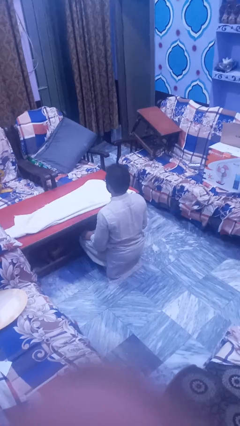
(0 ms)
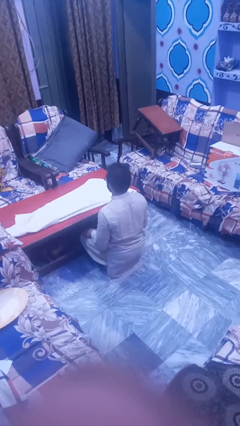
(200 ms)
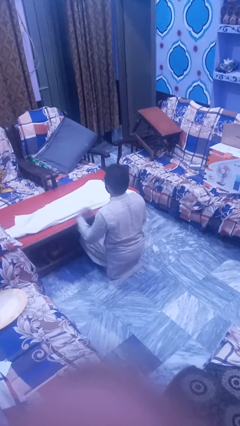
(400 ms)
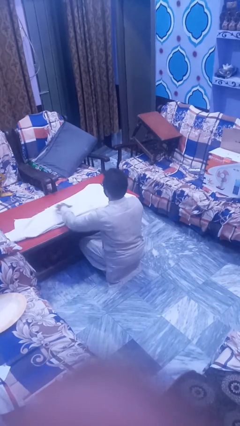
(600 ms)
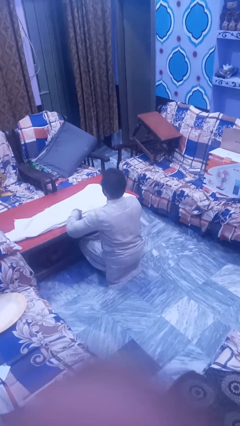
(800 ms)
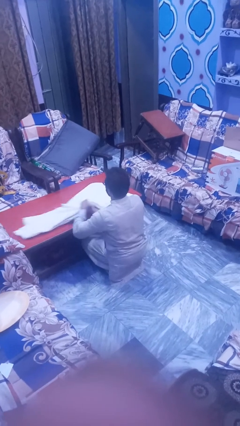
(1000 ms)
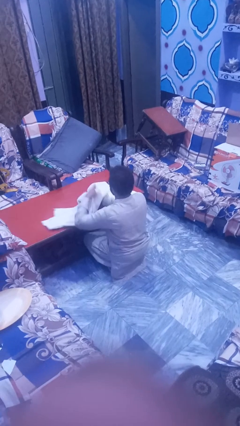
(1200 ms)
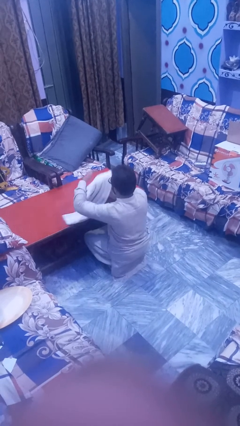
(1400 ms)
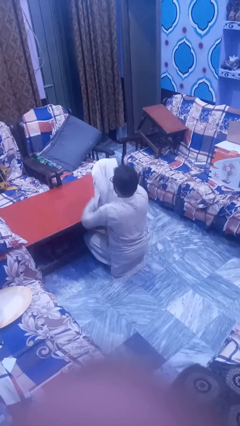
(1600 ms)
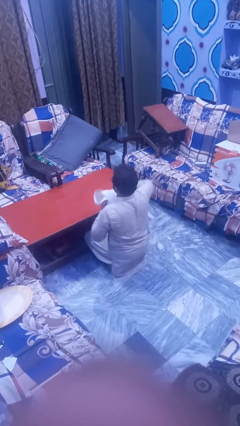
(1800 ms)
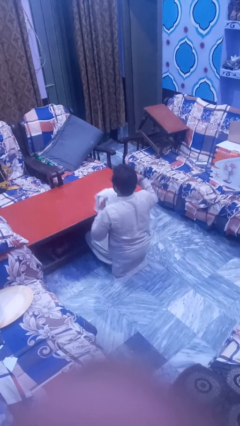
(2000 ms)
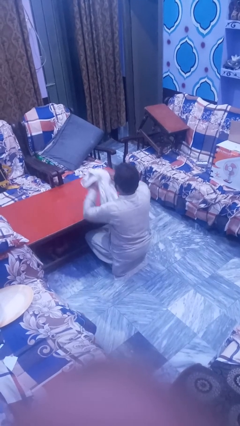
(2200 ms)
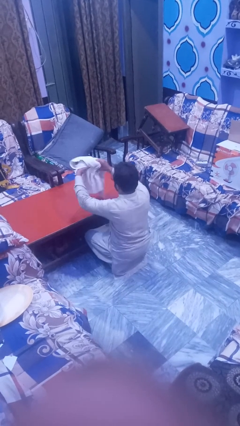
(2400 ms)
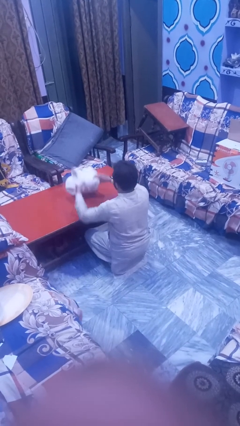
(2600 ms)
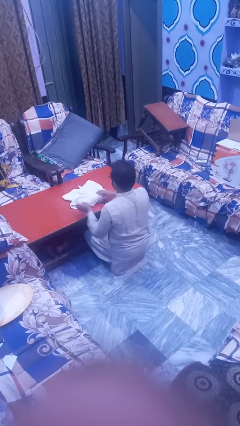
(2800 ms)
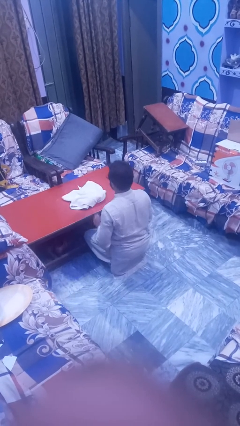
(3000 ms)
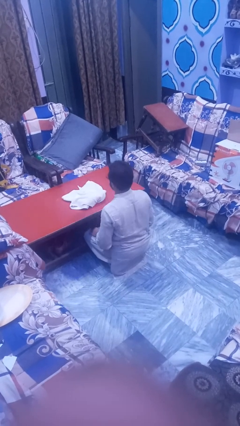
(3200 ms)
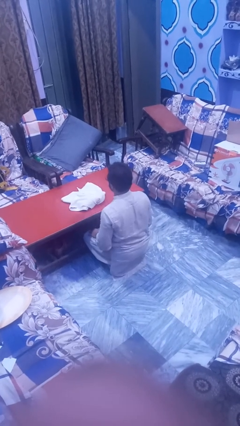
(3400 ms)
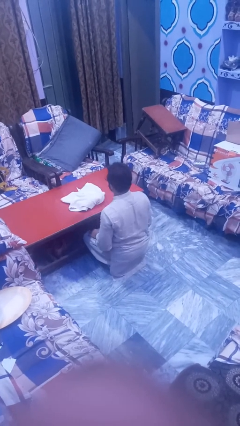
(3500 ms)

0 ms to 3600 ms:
person folds tablecloth

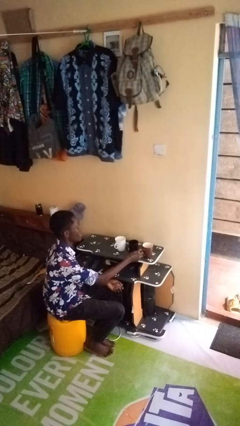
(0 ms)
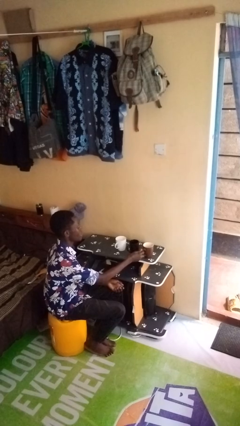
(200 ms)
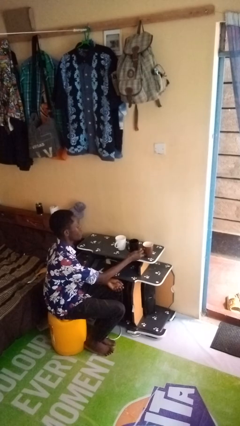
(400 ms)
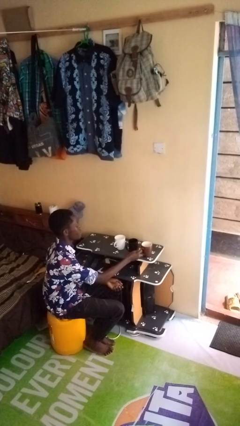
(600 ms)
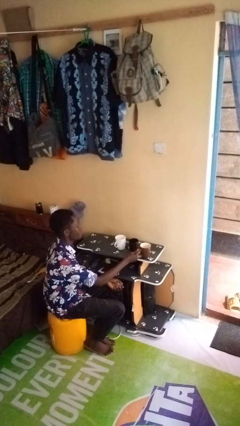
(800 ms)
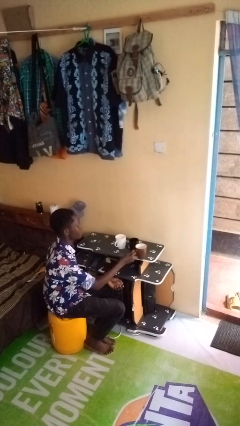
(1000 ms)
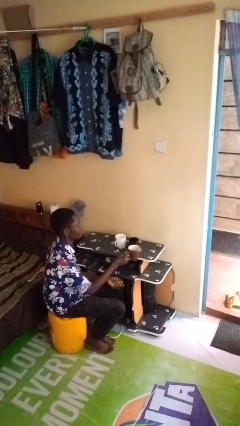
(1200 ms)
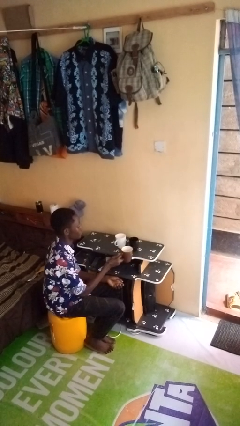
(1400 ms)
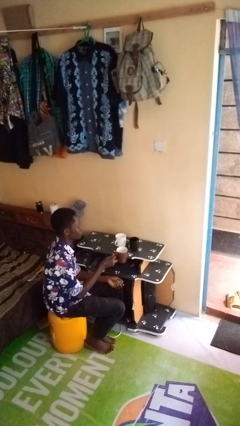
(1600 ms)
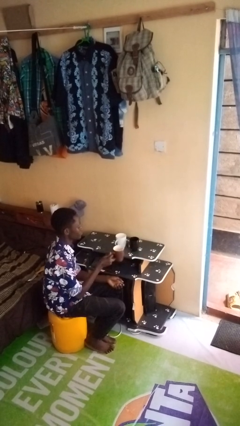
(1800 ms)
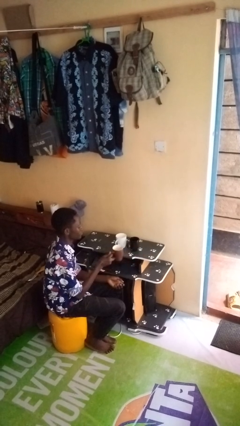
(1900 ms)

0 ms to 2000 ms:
person picks up object from table

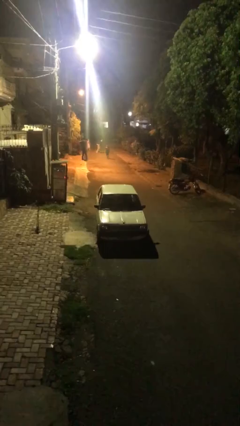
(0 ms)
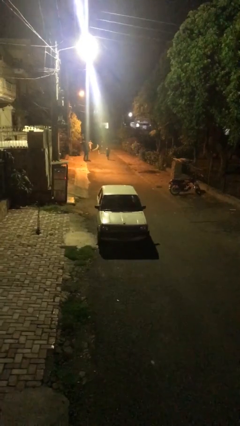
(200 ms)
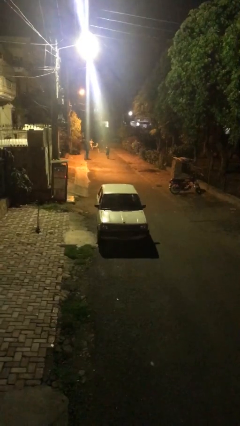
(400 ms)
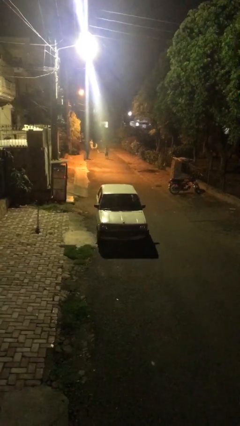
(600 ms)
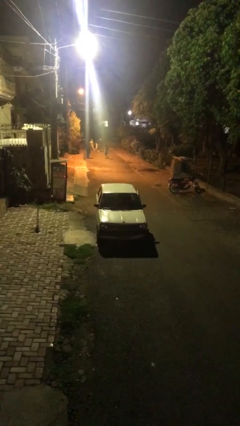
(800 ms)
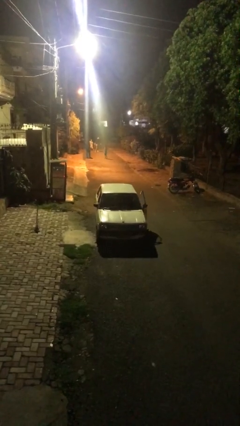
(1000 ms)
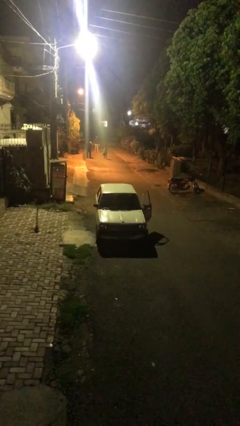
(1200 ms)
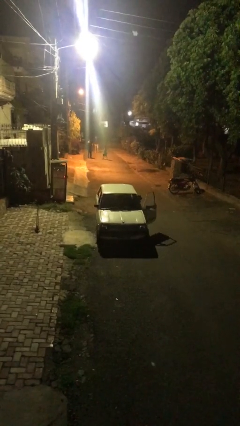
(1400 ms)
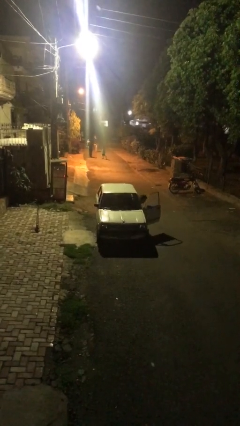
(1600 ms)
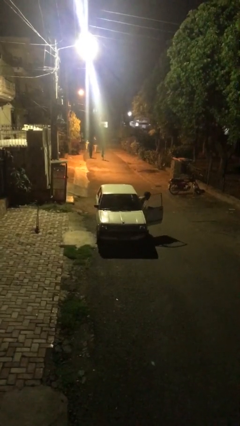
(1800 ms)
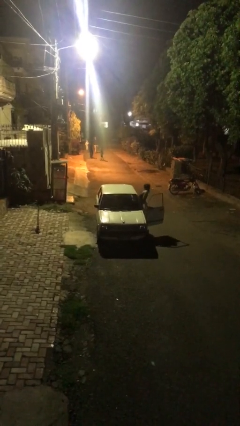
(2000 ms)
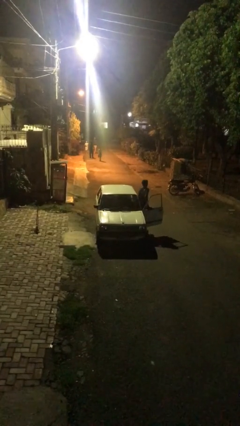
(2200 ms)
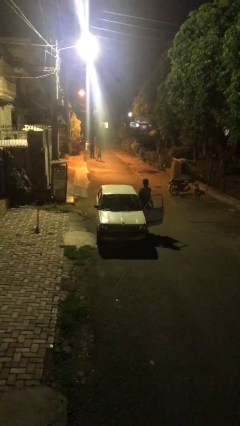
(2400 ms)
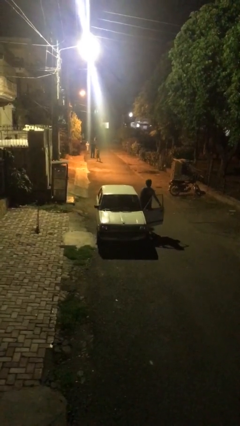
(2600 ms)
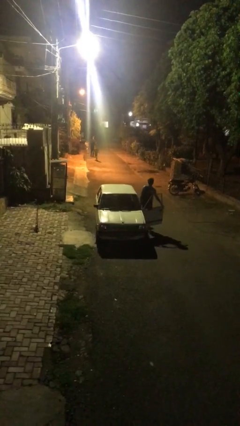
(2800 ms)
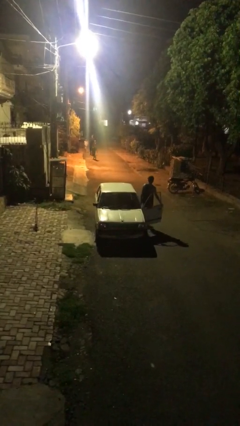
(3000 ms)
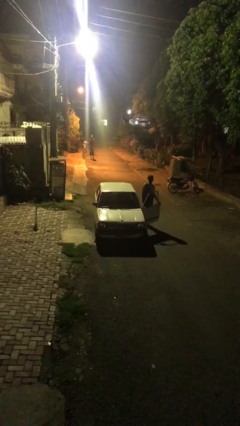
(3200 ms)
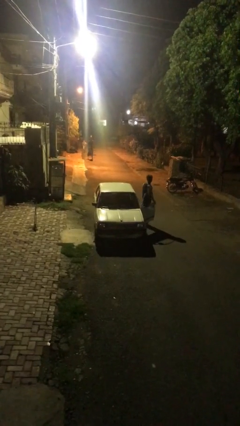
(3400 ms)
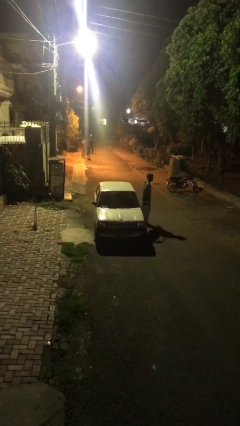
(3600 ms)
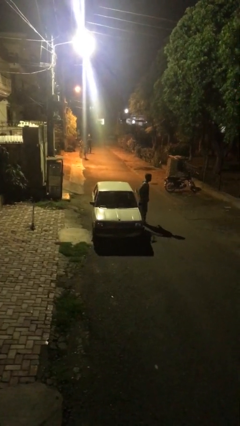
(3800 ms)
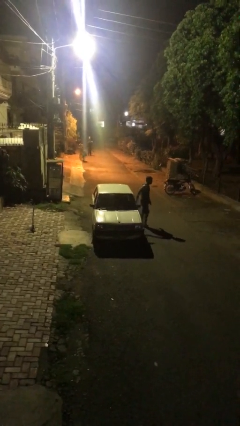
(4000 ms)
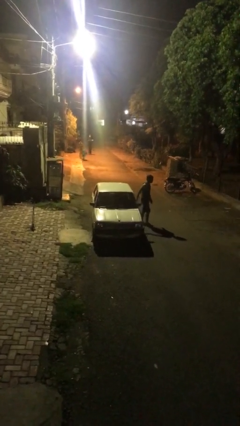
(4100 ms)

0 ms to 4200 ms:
car drops off person

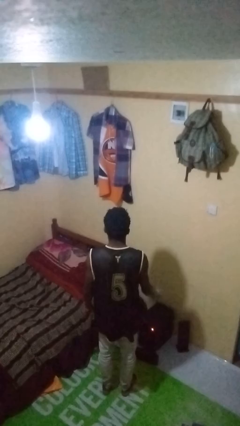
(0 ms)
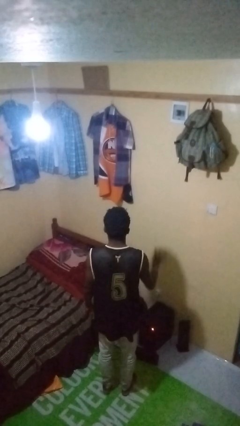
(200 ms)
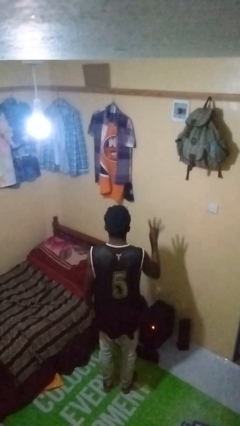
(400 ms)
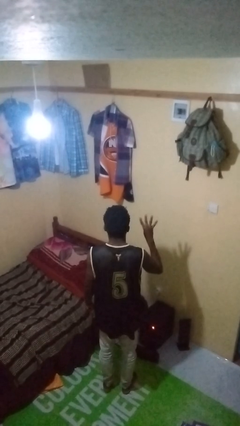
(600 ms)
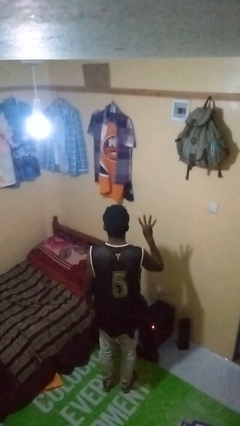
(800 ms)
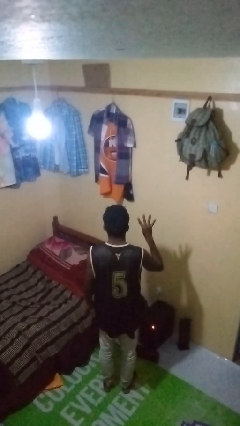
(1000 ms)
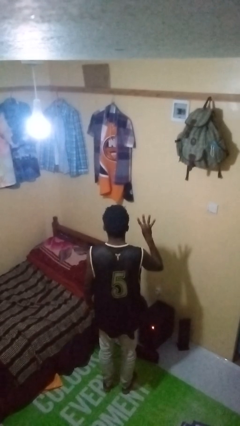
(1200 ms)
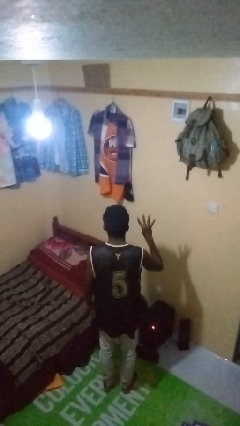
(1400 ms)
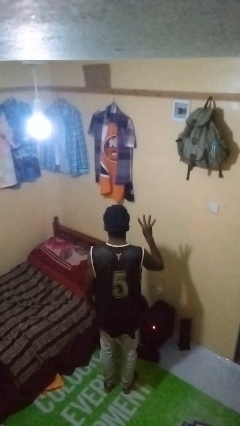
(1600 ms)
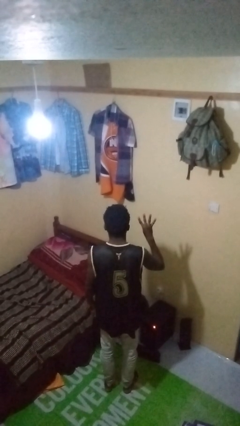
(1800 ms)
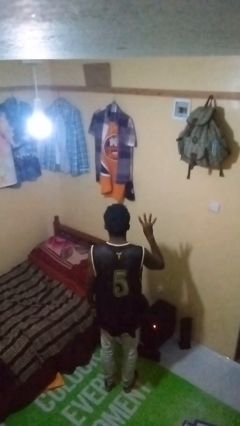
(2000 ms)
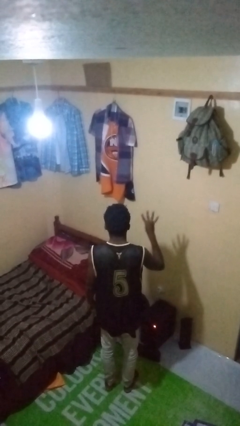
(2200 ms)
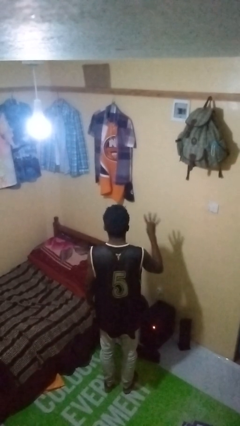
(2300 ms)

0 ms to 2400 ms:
person gestures number four

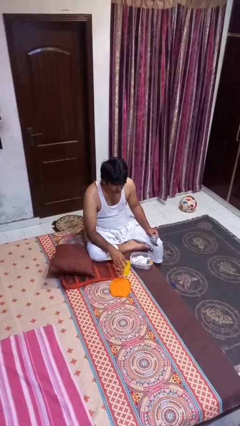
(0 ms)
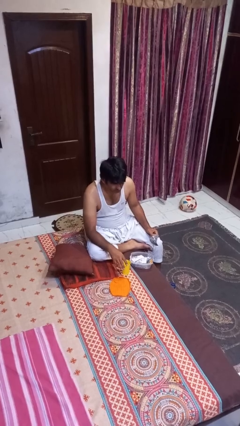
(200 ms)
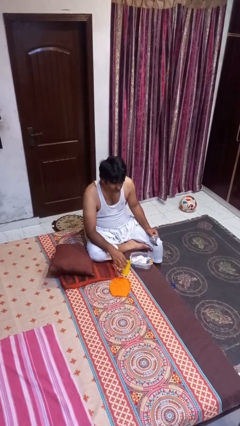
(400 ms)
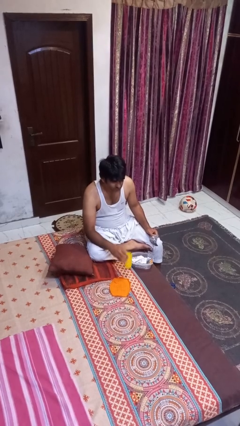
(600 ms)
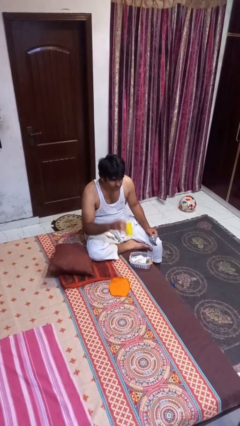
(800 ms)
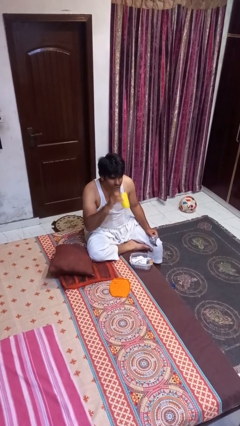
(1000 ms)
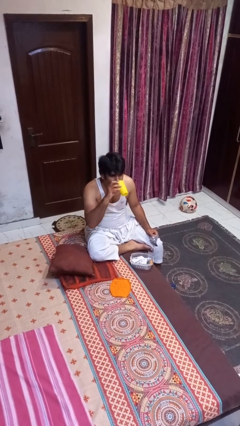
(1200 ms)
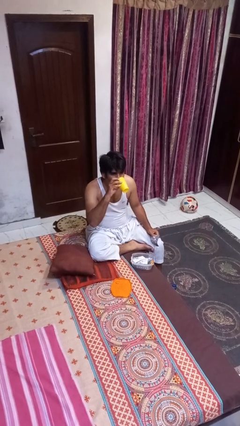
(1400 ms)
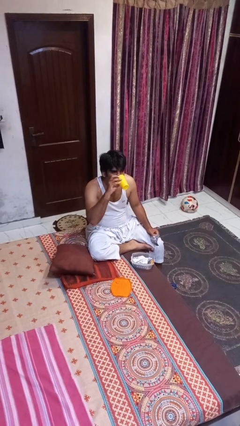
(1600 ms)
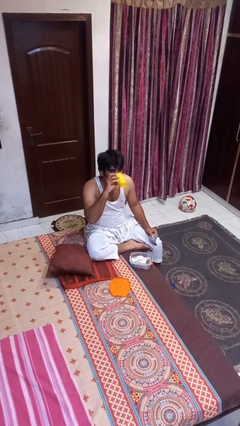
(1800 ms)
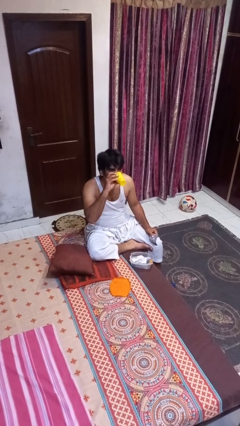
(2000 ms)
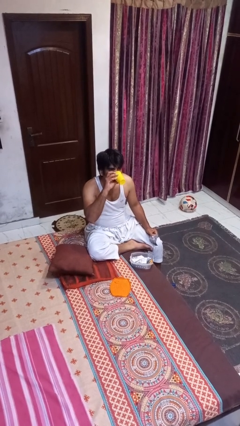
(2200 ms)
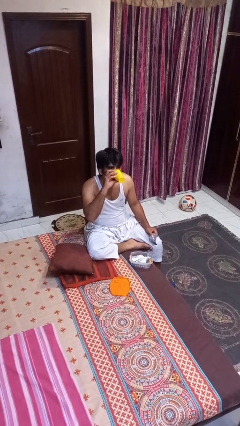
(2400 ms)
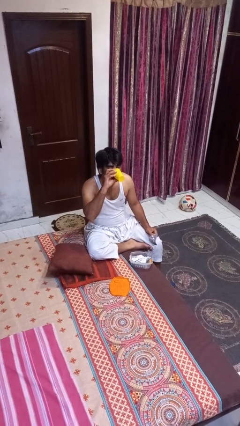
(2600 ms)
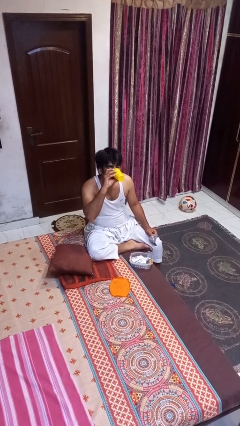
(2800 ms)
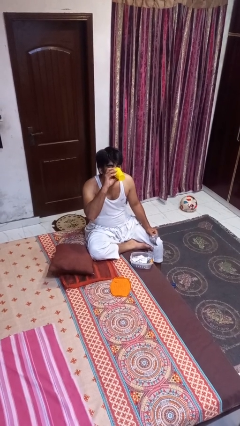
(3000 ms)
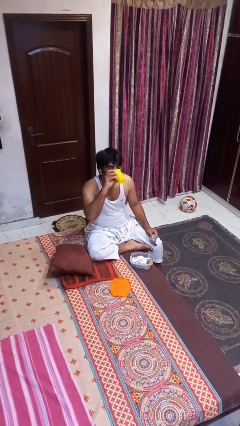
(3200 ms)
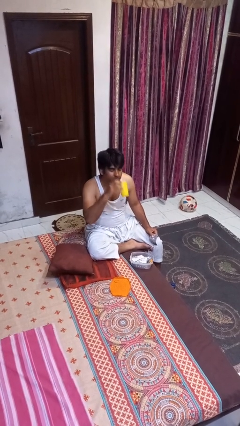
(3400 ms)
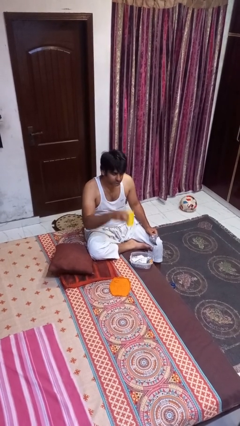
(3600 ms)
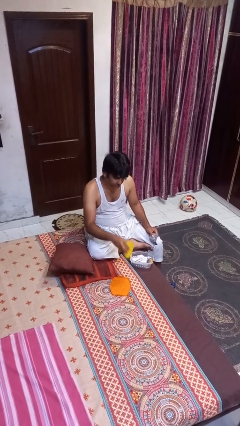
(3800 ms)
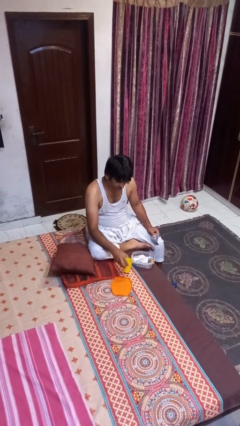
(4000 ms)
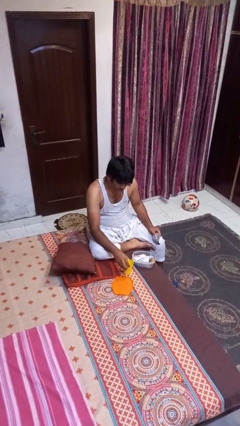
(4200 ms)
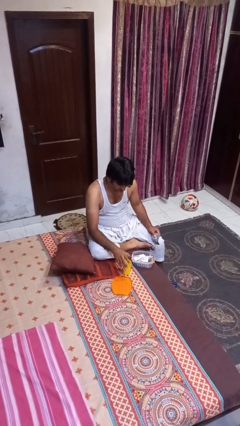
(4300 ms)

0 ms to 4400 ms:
person drinks from cup

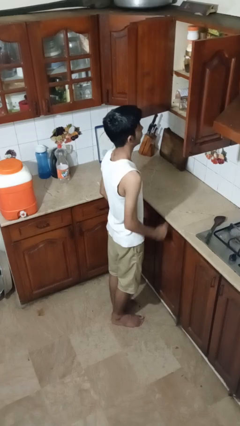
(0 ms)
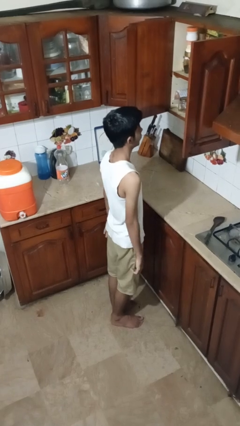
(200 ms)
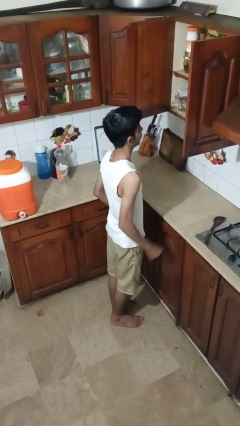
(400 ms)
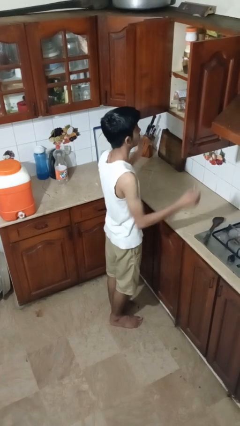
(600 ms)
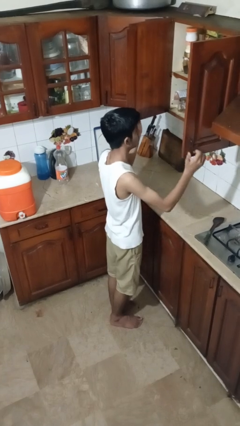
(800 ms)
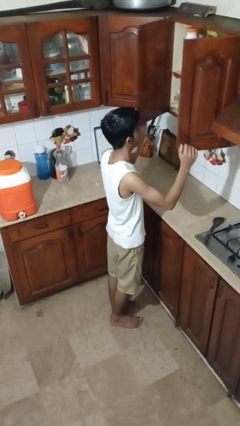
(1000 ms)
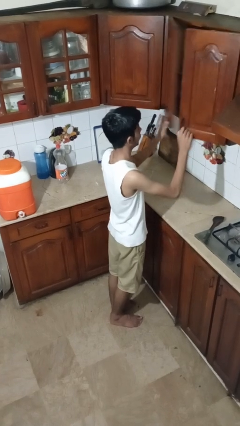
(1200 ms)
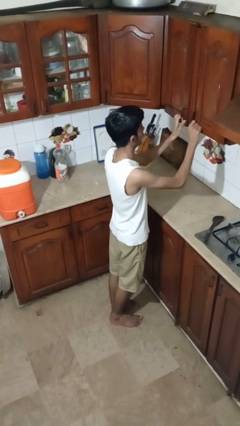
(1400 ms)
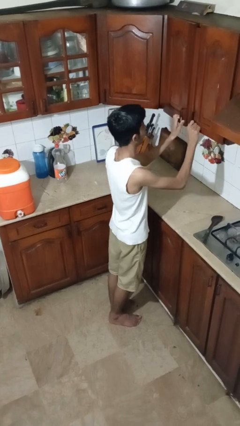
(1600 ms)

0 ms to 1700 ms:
person closes cabinet
